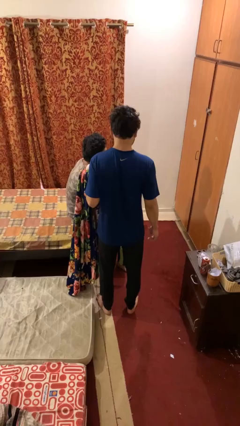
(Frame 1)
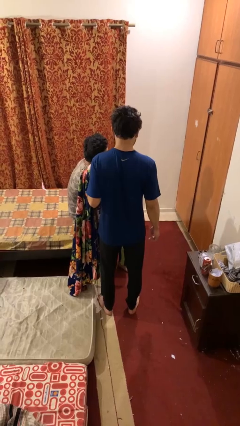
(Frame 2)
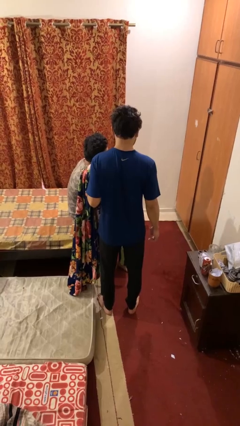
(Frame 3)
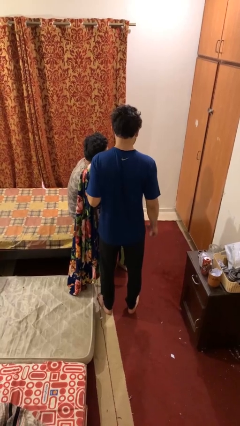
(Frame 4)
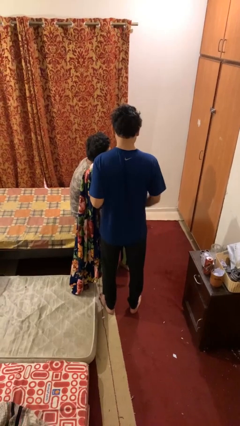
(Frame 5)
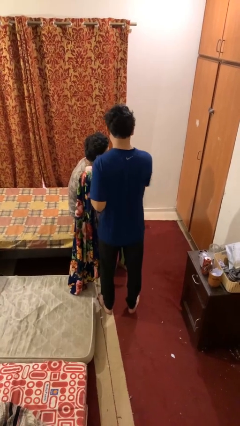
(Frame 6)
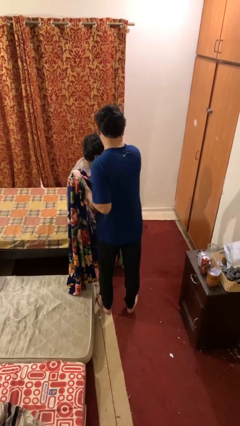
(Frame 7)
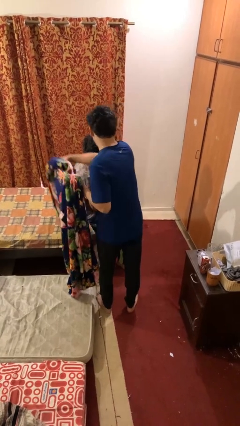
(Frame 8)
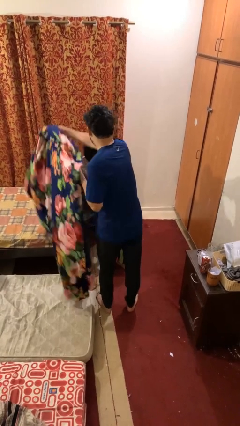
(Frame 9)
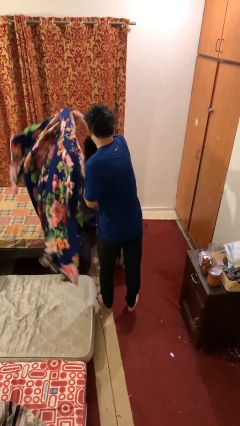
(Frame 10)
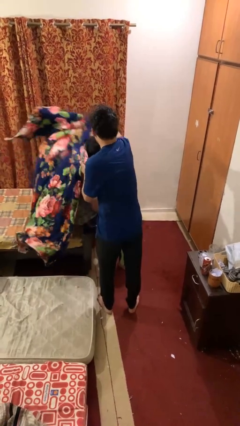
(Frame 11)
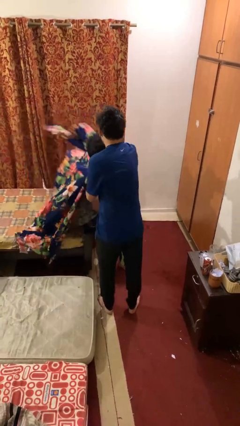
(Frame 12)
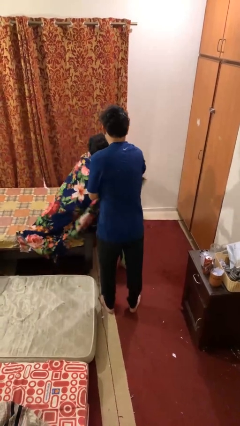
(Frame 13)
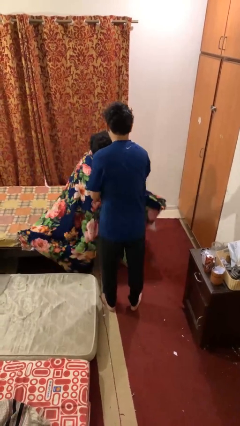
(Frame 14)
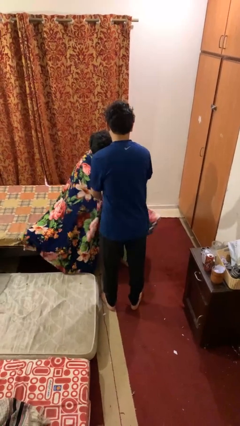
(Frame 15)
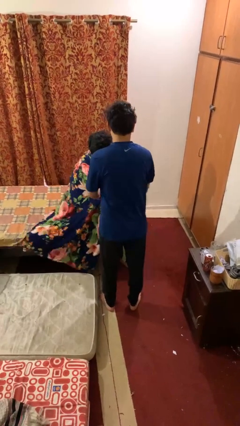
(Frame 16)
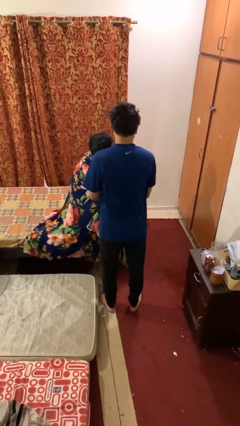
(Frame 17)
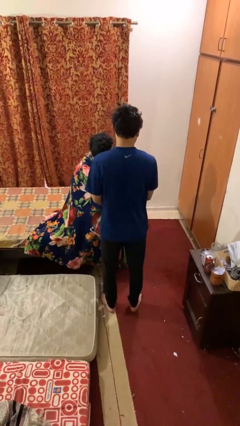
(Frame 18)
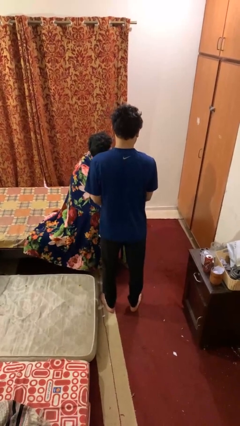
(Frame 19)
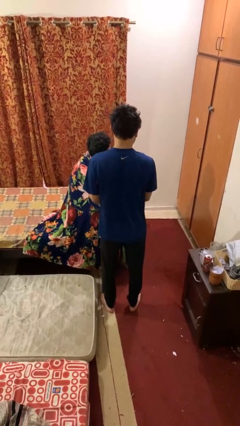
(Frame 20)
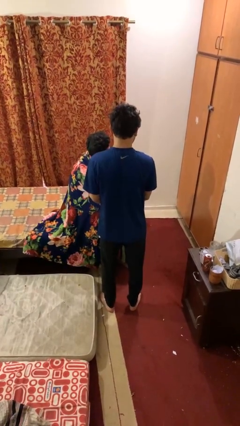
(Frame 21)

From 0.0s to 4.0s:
person covers friend with blanket

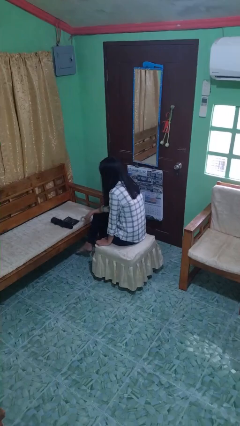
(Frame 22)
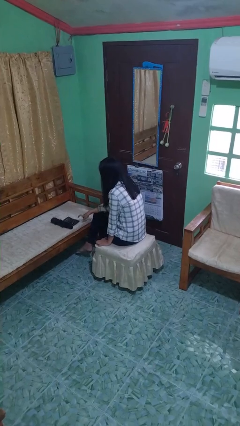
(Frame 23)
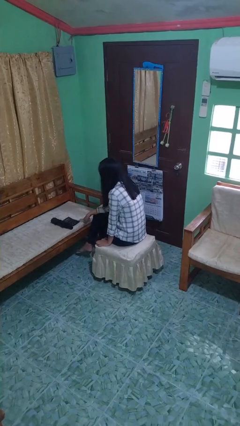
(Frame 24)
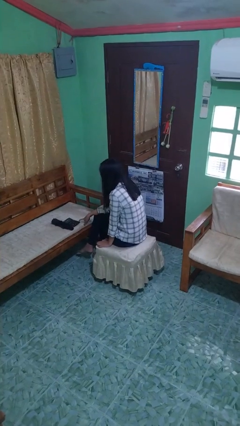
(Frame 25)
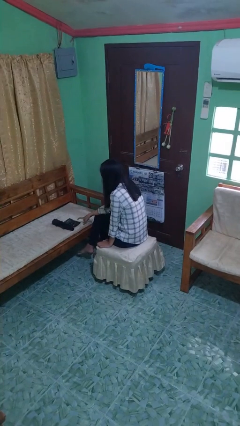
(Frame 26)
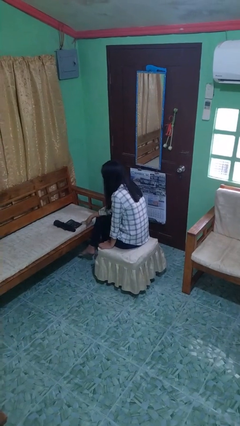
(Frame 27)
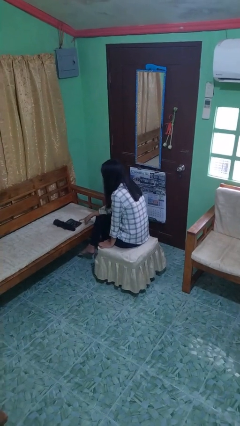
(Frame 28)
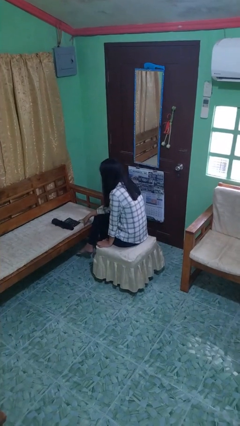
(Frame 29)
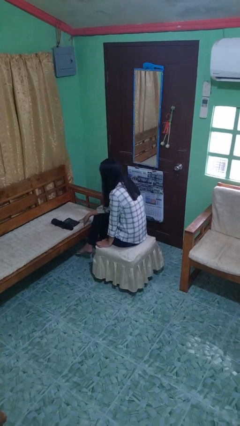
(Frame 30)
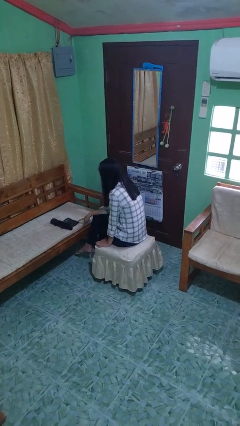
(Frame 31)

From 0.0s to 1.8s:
person taps object with finger

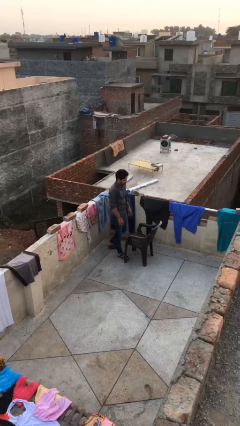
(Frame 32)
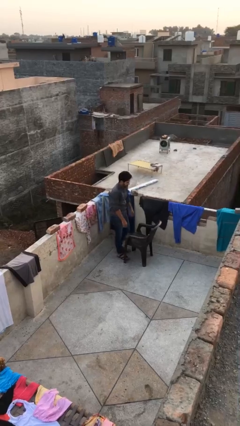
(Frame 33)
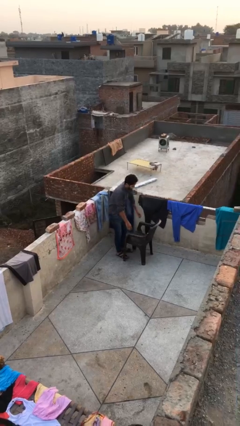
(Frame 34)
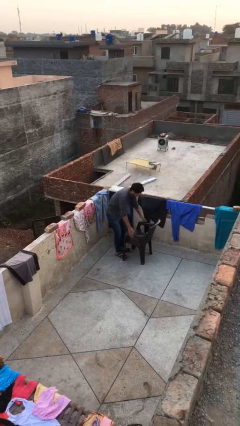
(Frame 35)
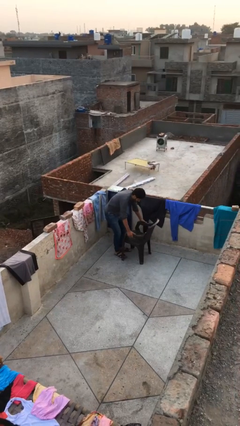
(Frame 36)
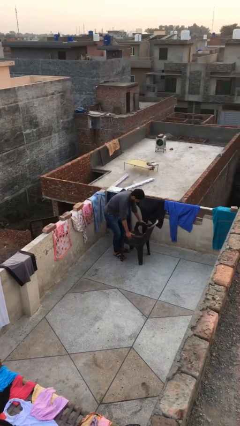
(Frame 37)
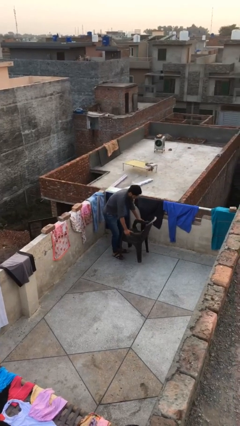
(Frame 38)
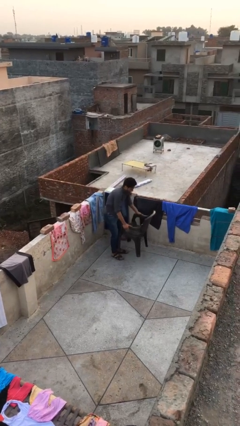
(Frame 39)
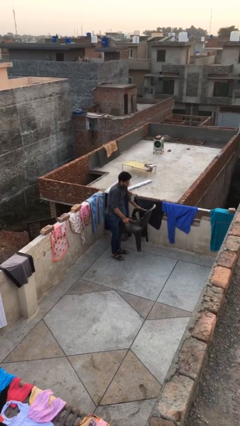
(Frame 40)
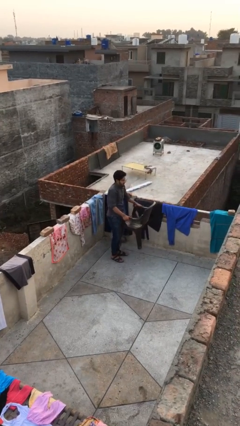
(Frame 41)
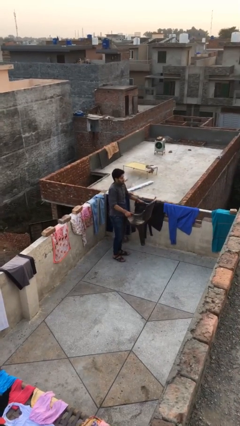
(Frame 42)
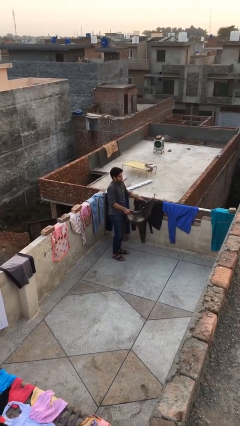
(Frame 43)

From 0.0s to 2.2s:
person picks up object from floor

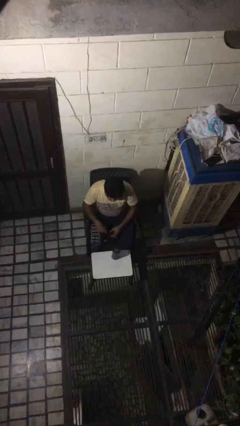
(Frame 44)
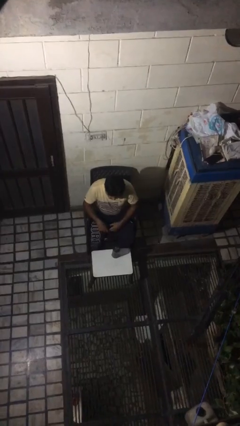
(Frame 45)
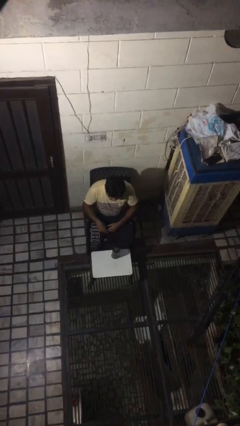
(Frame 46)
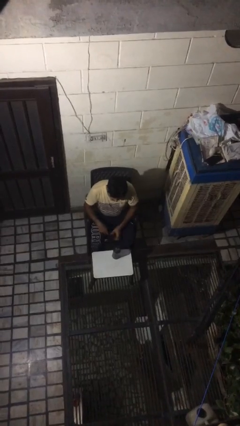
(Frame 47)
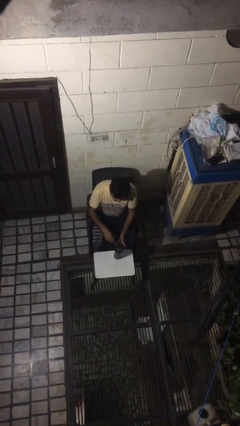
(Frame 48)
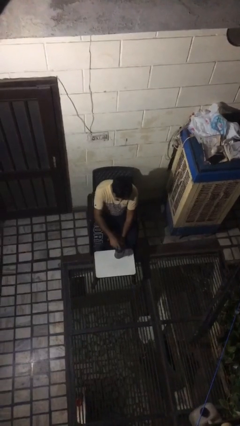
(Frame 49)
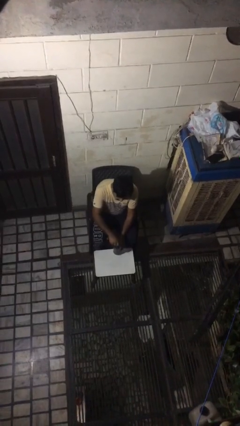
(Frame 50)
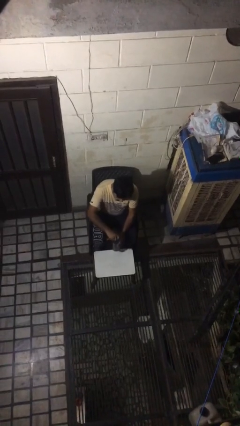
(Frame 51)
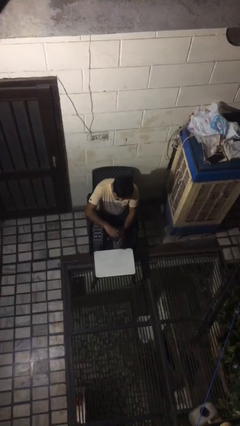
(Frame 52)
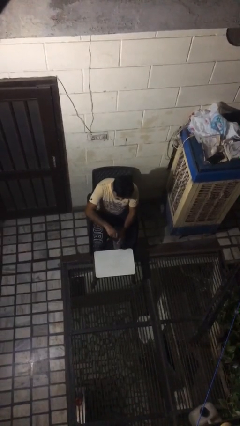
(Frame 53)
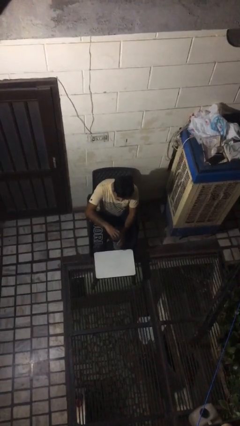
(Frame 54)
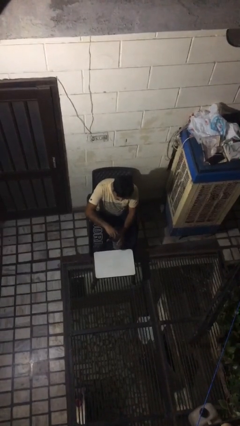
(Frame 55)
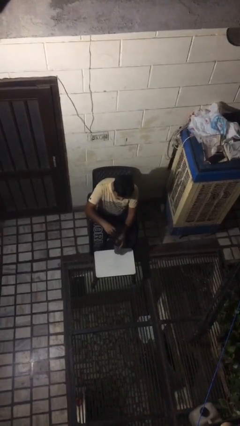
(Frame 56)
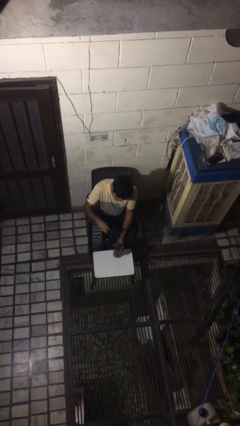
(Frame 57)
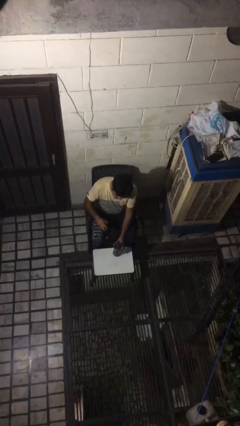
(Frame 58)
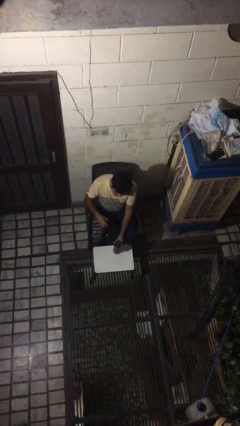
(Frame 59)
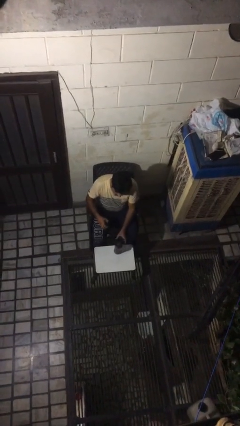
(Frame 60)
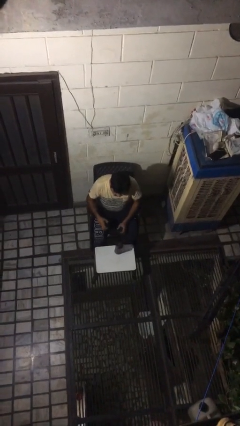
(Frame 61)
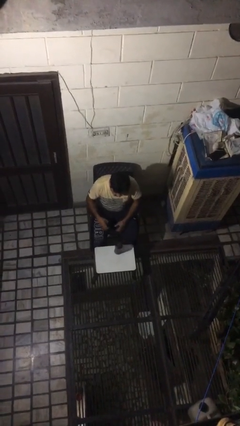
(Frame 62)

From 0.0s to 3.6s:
person unscrews lid from bottle

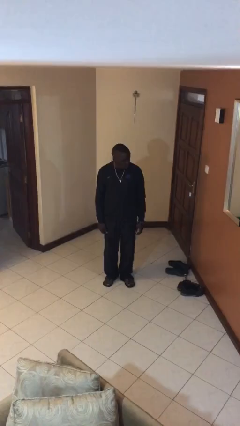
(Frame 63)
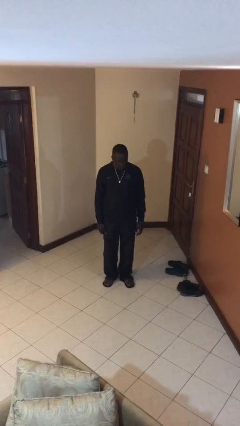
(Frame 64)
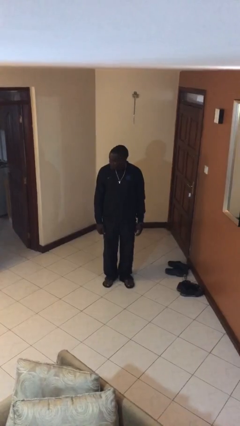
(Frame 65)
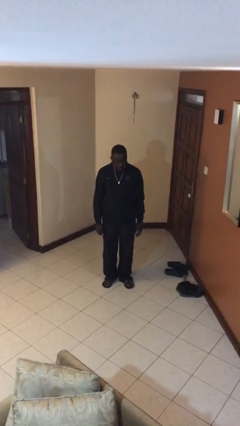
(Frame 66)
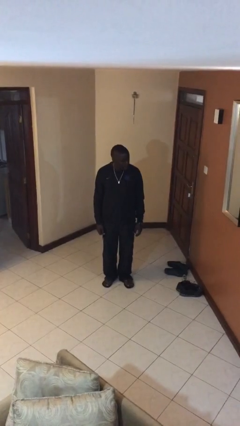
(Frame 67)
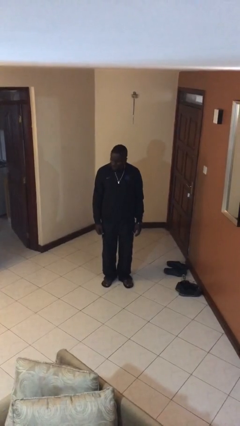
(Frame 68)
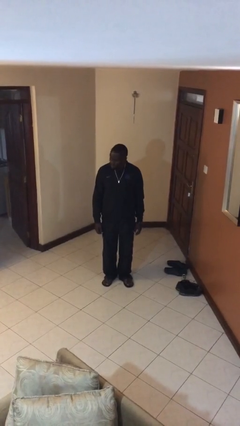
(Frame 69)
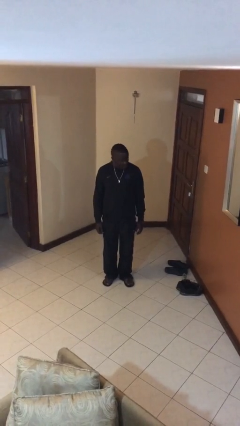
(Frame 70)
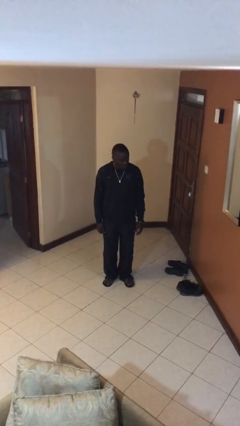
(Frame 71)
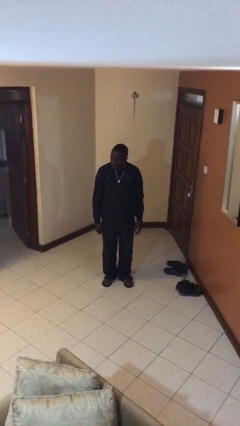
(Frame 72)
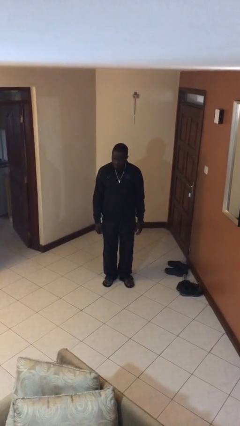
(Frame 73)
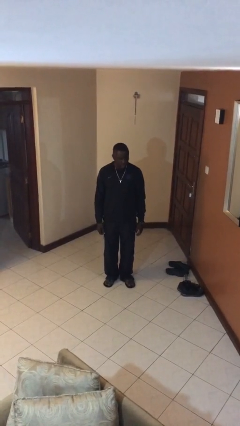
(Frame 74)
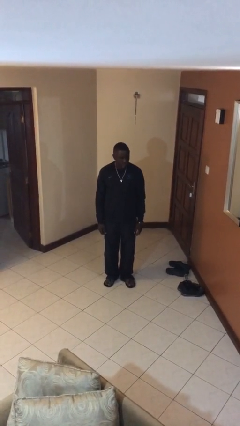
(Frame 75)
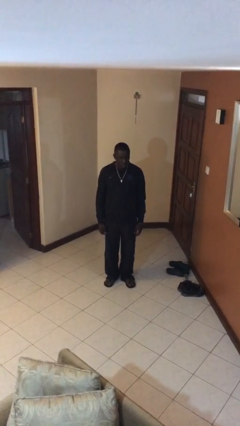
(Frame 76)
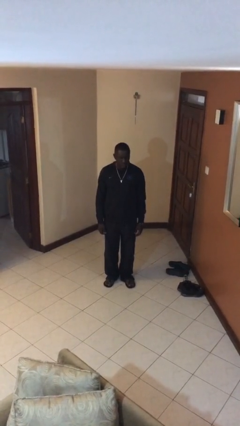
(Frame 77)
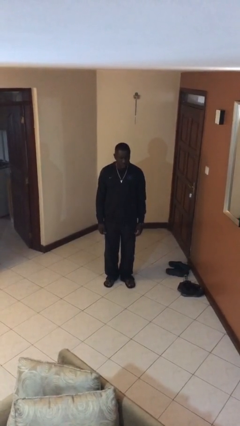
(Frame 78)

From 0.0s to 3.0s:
person shakes head

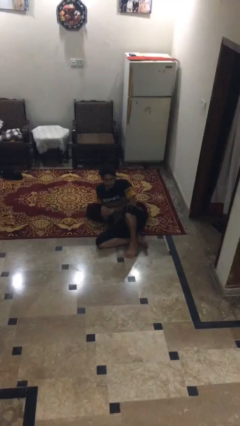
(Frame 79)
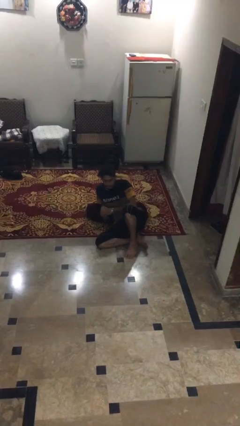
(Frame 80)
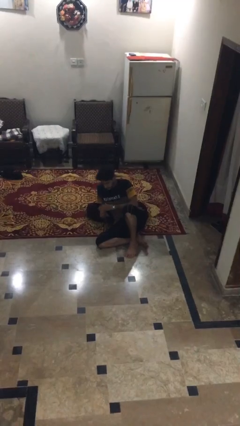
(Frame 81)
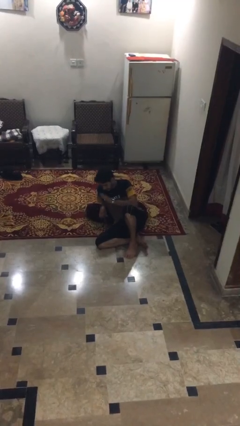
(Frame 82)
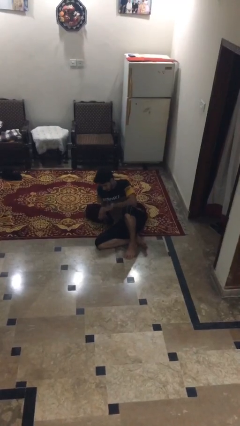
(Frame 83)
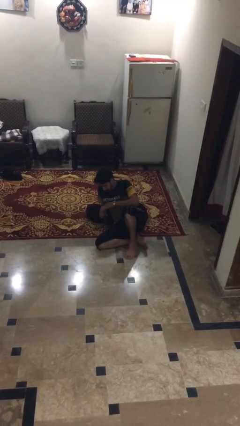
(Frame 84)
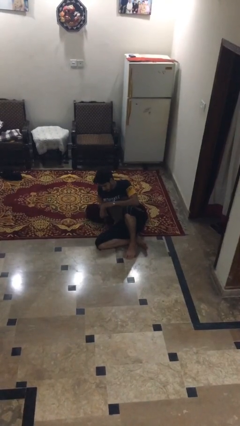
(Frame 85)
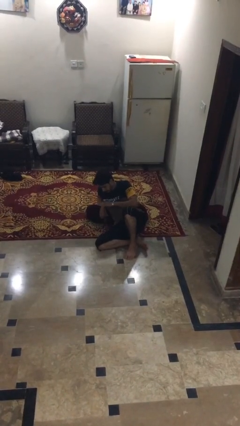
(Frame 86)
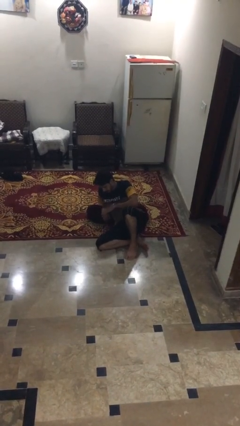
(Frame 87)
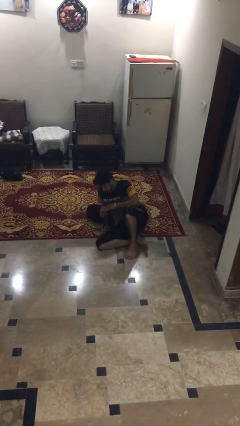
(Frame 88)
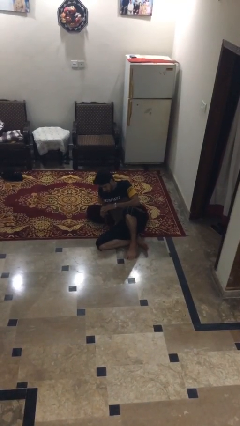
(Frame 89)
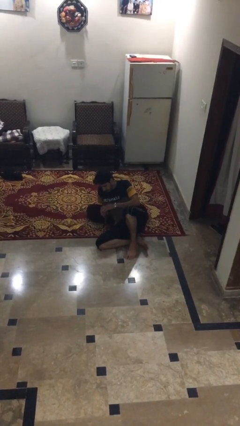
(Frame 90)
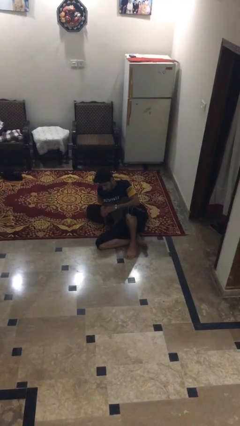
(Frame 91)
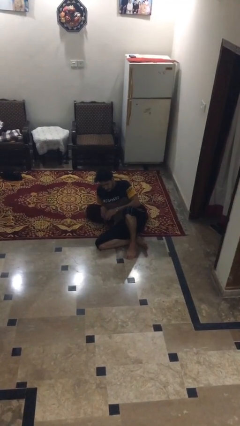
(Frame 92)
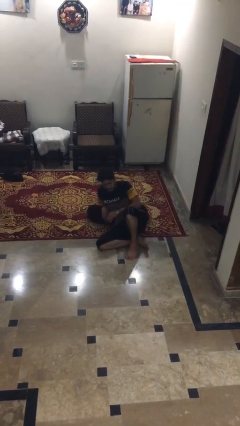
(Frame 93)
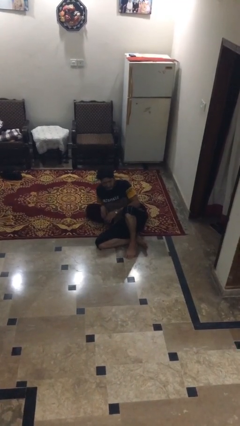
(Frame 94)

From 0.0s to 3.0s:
person swats bug
